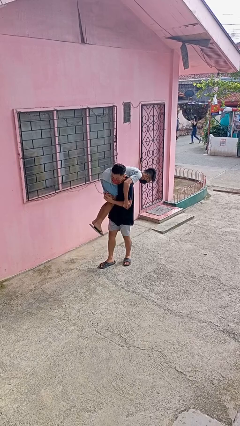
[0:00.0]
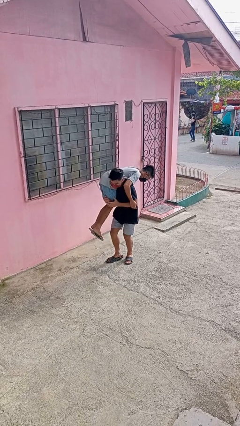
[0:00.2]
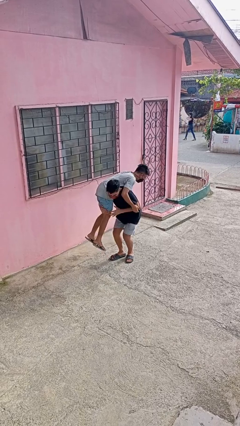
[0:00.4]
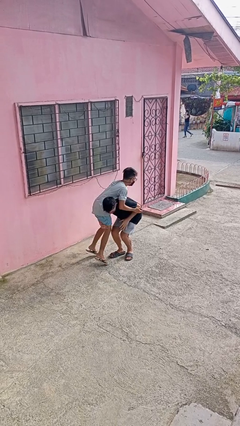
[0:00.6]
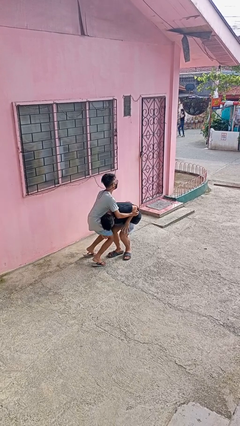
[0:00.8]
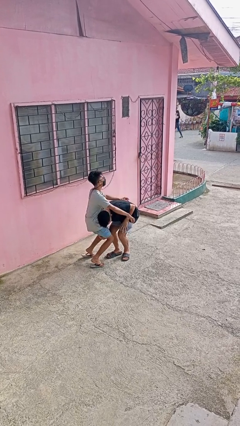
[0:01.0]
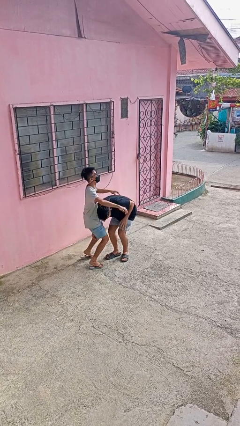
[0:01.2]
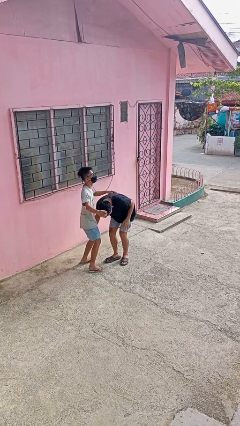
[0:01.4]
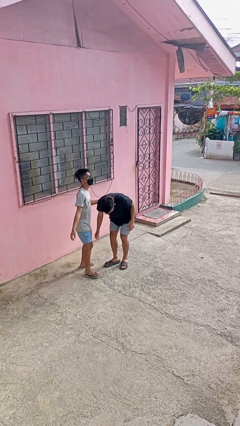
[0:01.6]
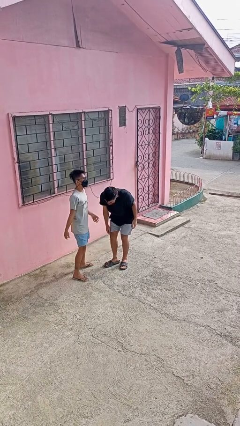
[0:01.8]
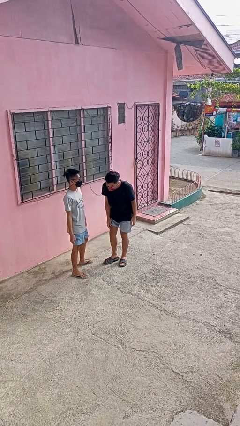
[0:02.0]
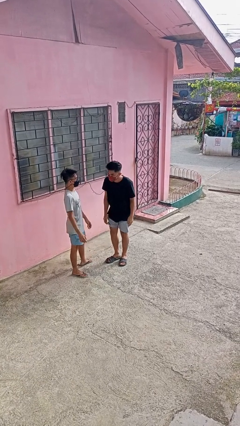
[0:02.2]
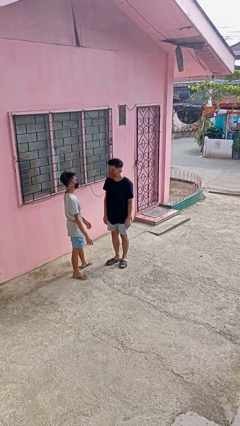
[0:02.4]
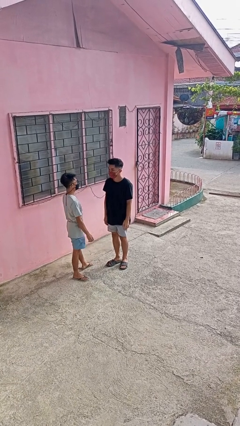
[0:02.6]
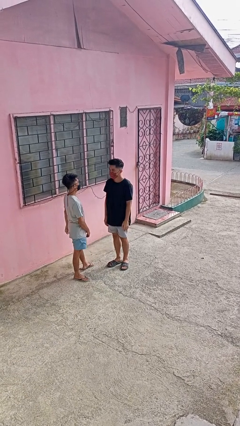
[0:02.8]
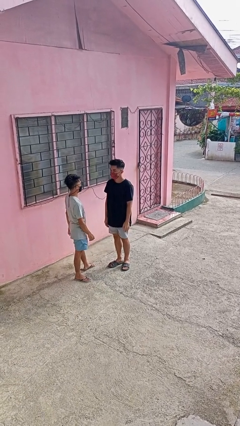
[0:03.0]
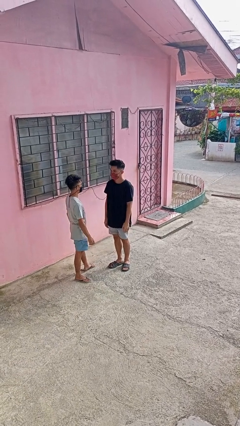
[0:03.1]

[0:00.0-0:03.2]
person puts down person

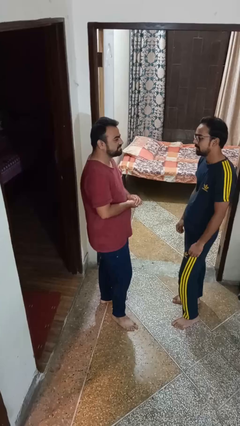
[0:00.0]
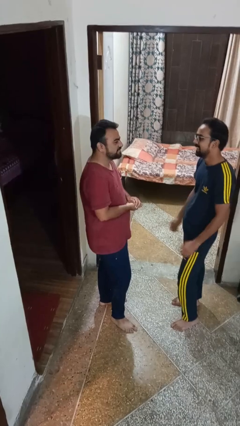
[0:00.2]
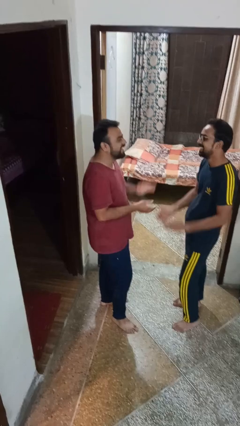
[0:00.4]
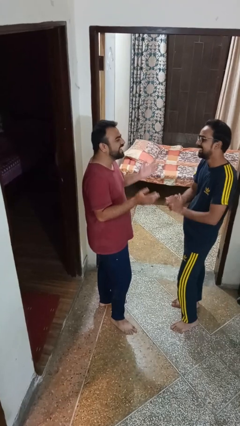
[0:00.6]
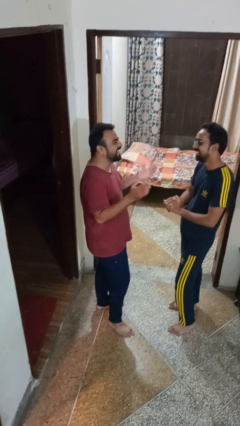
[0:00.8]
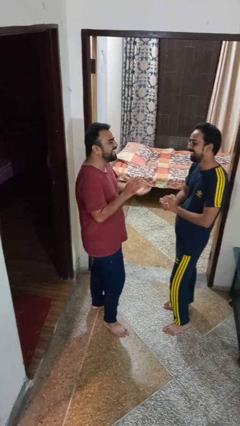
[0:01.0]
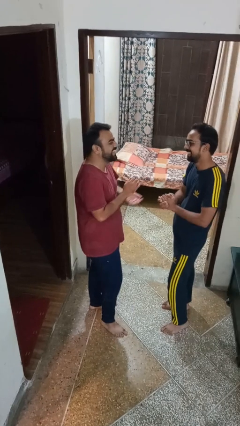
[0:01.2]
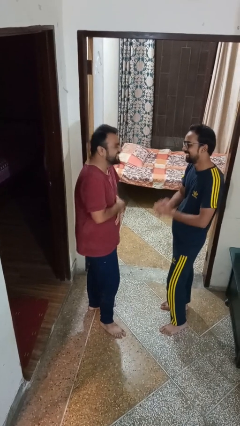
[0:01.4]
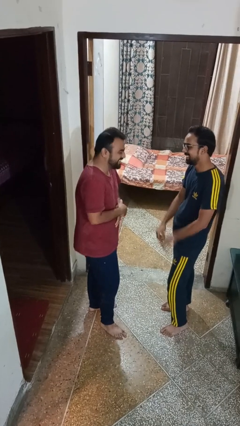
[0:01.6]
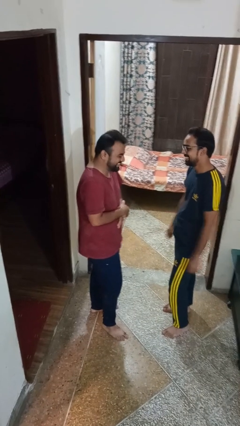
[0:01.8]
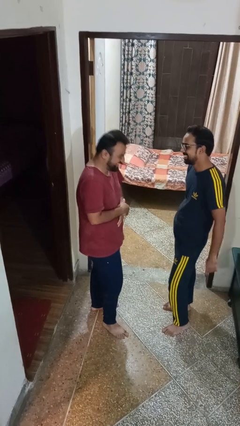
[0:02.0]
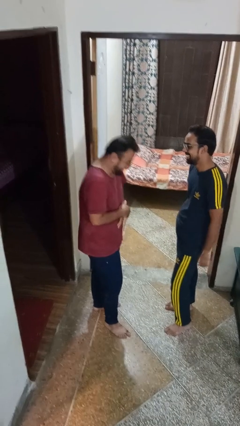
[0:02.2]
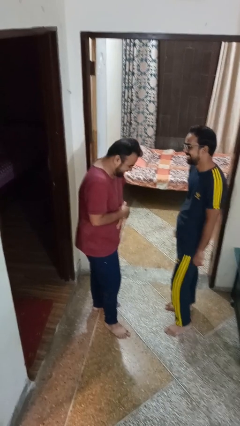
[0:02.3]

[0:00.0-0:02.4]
person laughs with person

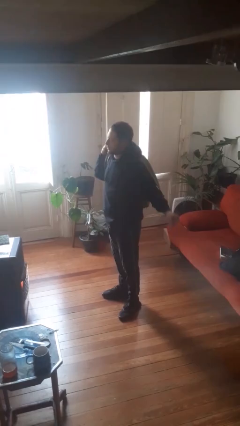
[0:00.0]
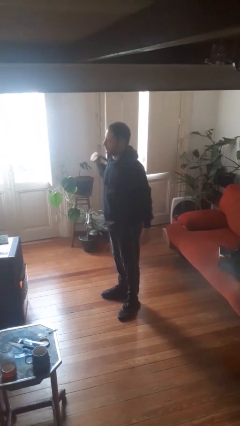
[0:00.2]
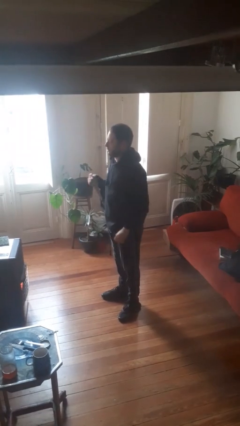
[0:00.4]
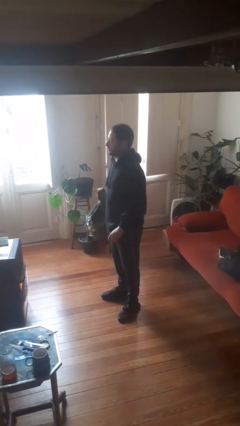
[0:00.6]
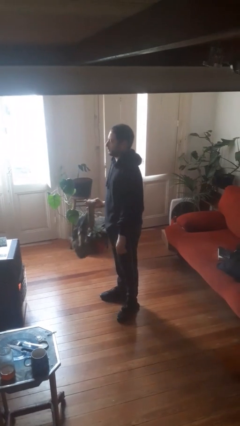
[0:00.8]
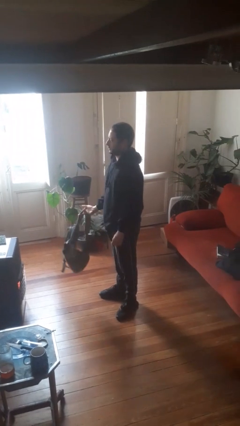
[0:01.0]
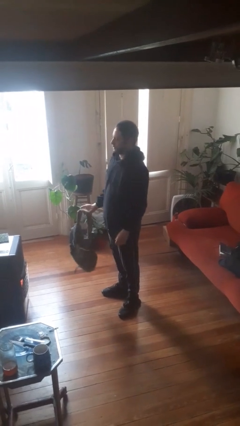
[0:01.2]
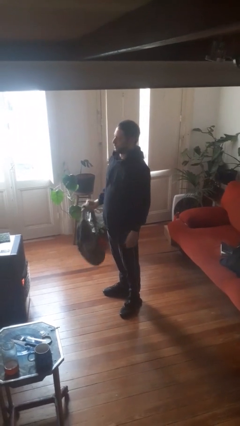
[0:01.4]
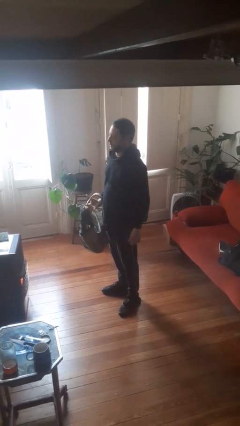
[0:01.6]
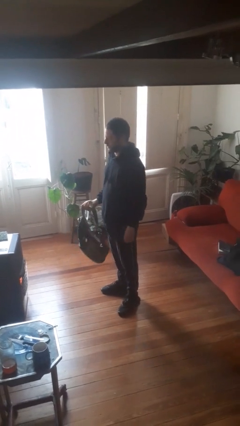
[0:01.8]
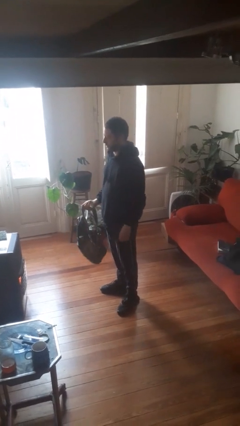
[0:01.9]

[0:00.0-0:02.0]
person takes off backpack

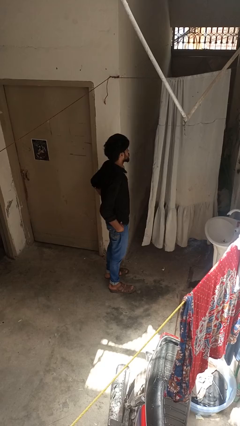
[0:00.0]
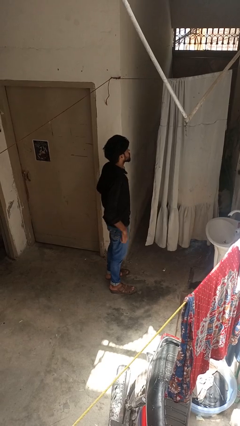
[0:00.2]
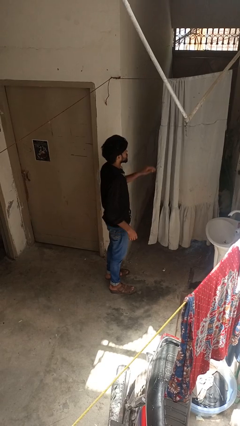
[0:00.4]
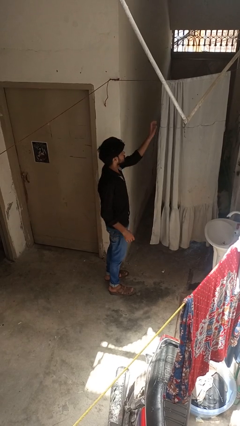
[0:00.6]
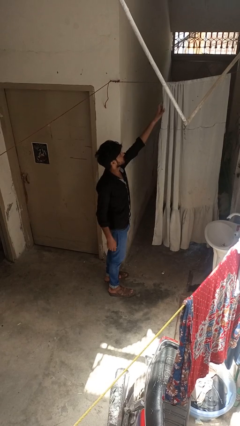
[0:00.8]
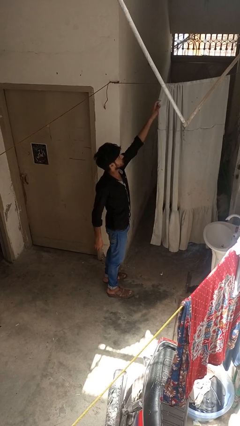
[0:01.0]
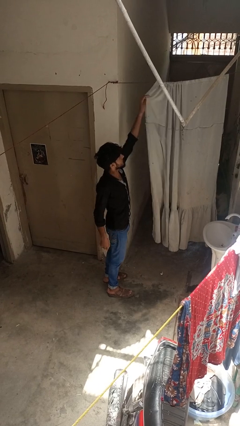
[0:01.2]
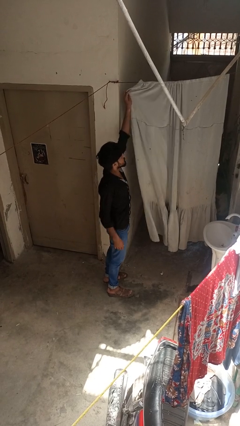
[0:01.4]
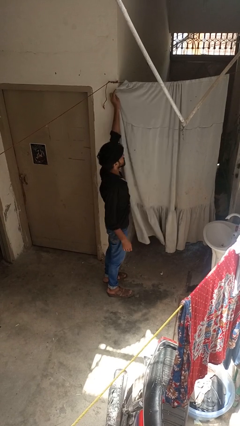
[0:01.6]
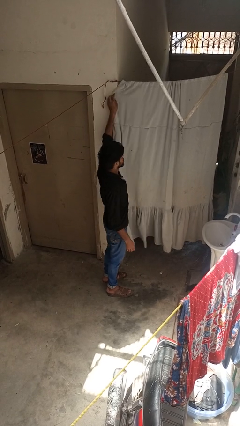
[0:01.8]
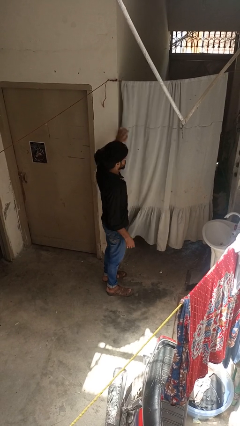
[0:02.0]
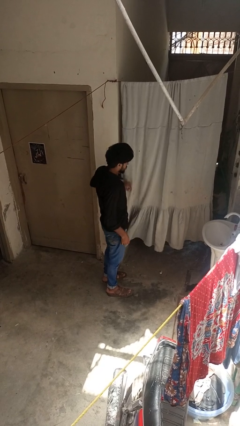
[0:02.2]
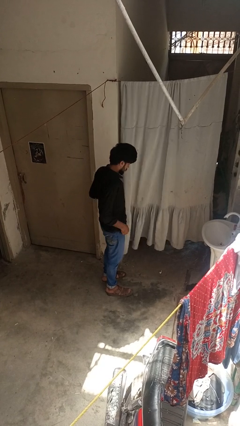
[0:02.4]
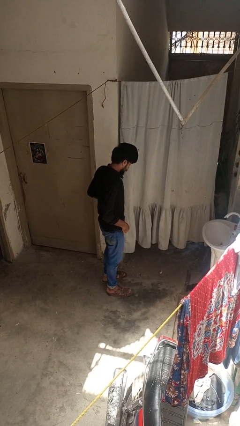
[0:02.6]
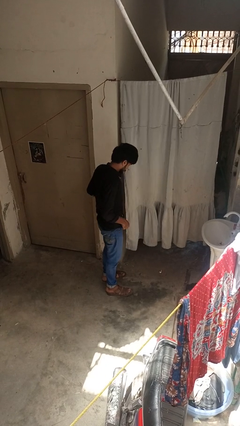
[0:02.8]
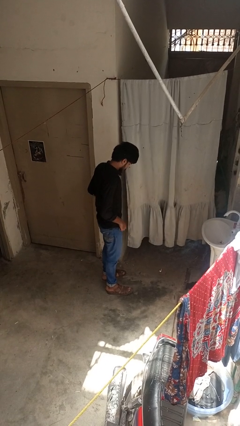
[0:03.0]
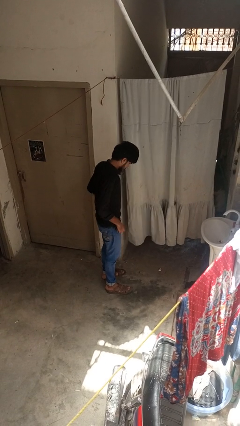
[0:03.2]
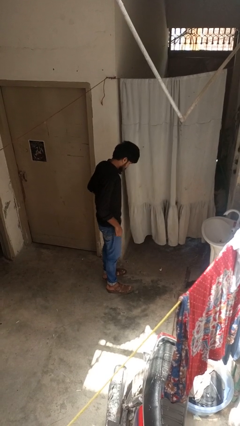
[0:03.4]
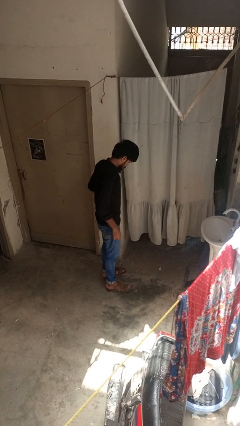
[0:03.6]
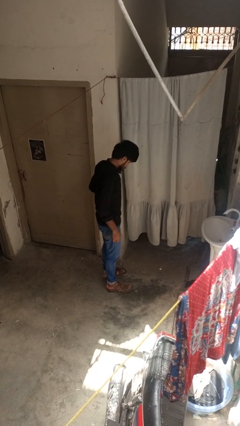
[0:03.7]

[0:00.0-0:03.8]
person closes curtains

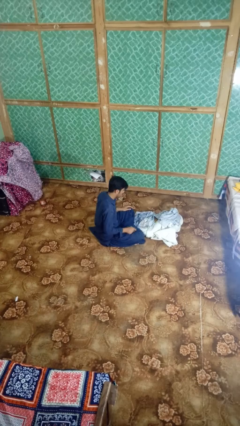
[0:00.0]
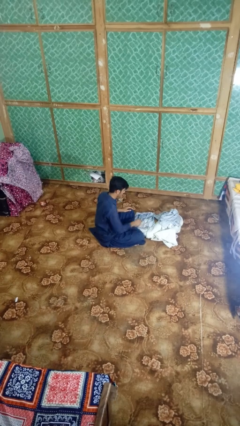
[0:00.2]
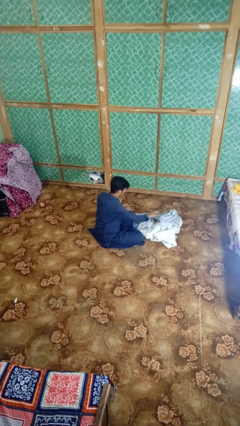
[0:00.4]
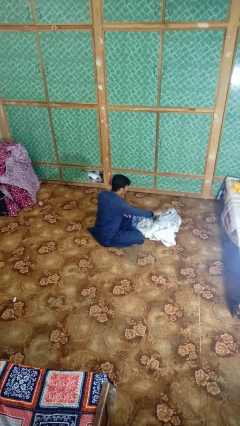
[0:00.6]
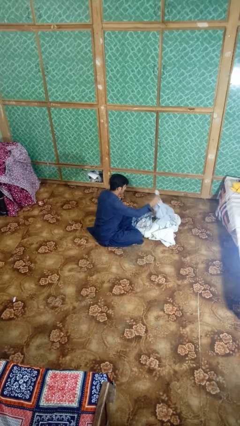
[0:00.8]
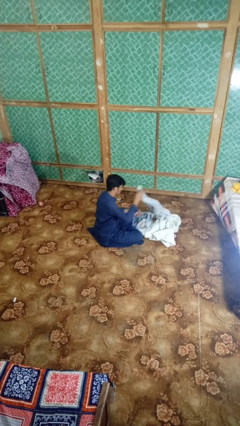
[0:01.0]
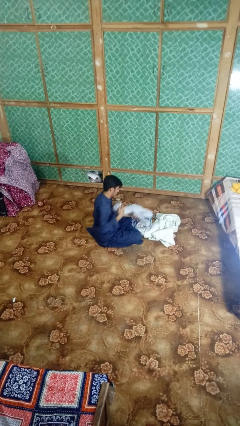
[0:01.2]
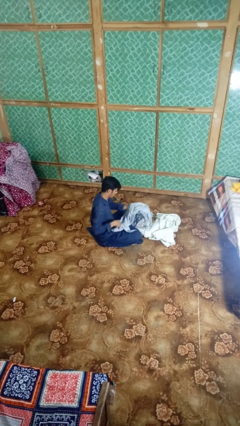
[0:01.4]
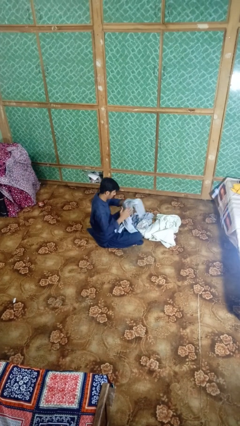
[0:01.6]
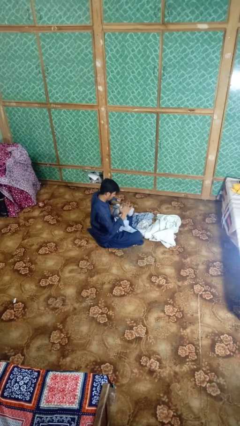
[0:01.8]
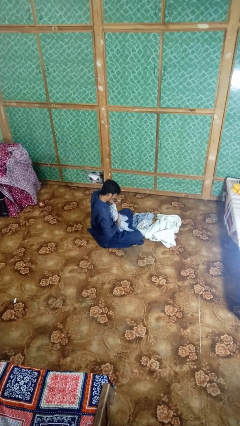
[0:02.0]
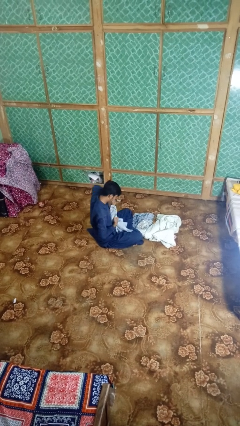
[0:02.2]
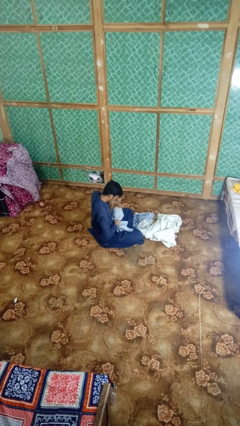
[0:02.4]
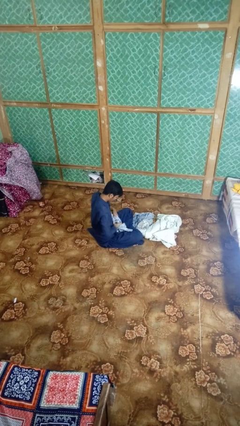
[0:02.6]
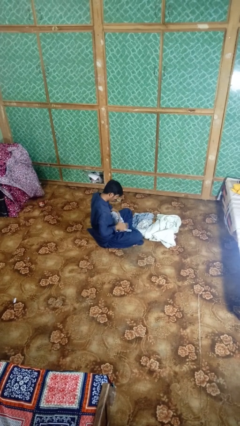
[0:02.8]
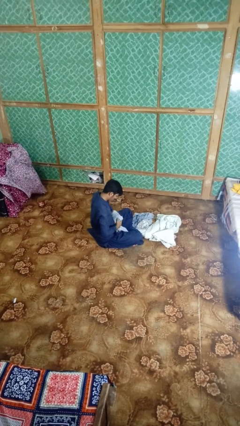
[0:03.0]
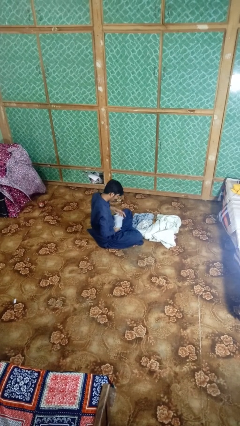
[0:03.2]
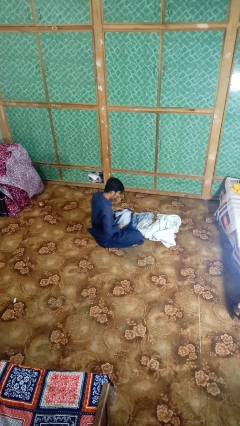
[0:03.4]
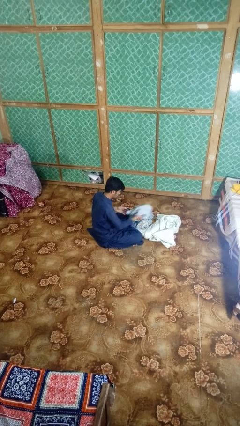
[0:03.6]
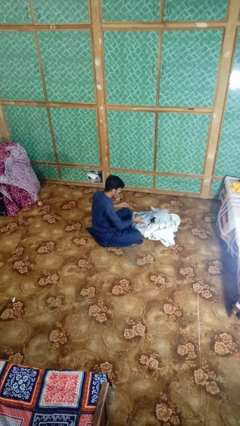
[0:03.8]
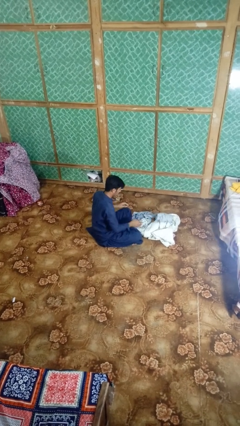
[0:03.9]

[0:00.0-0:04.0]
person folds shirt

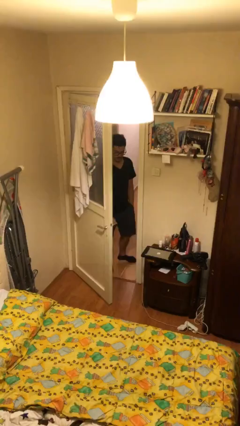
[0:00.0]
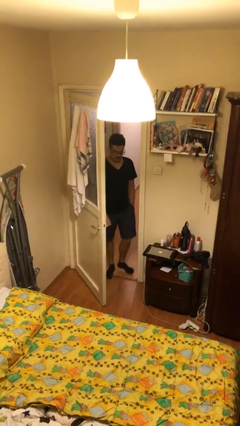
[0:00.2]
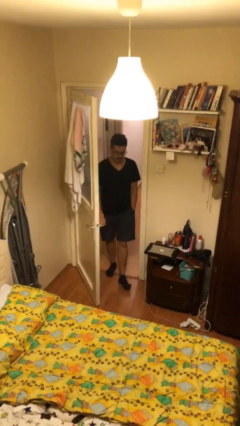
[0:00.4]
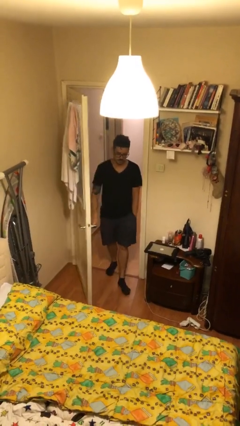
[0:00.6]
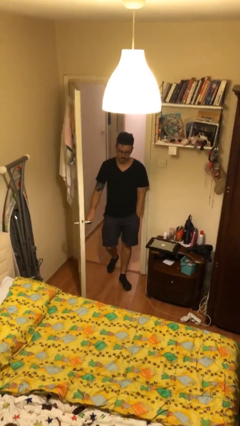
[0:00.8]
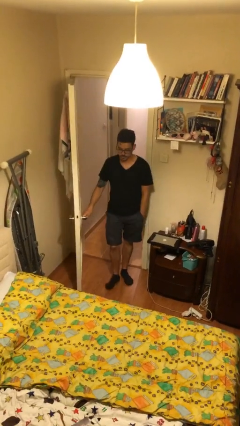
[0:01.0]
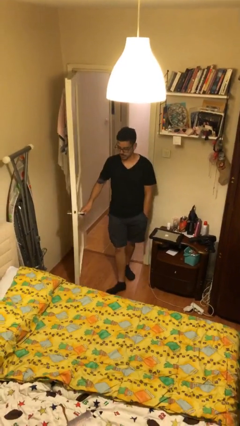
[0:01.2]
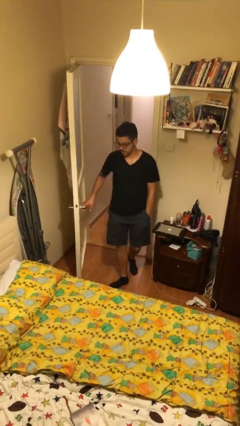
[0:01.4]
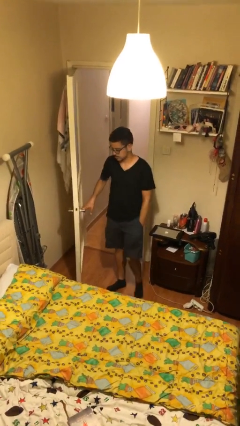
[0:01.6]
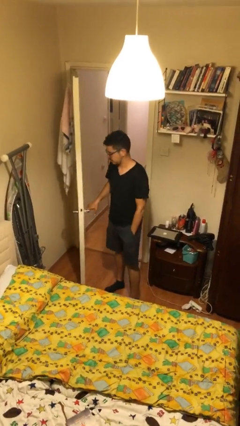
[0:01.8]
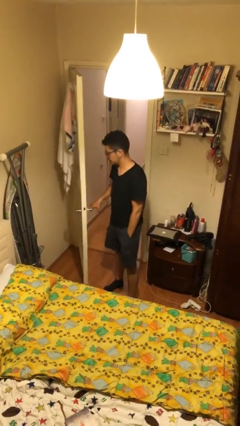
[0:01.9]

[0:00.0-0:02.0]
person enters scene through structure
